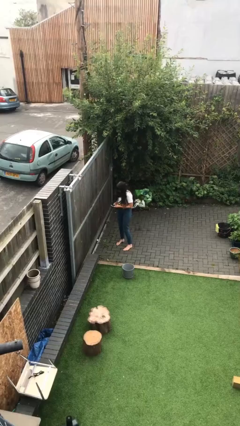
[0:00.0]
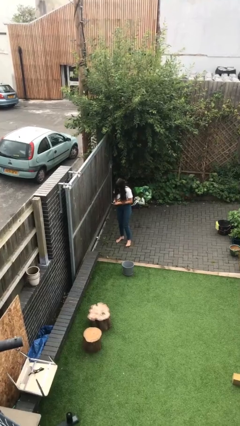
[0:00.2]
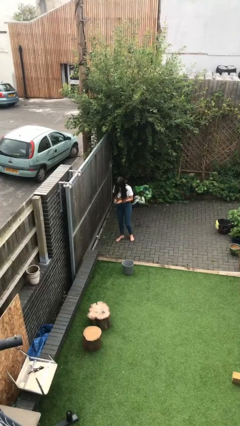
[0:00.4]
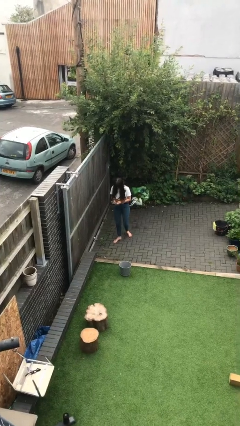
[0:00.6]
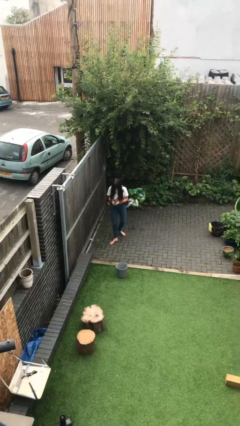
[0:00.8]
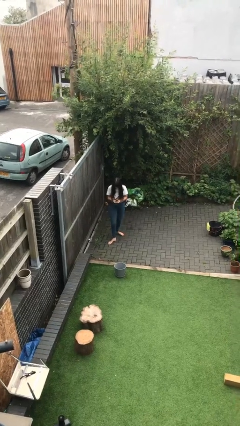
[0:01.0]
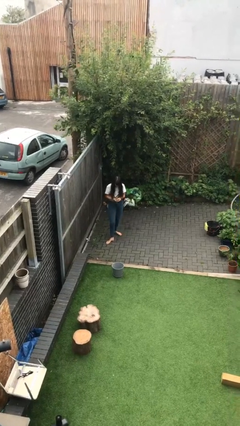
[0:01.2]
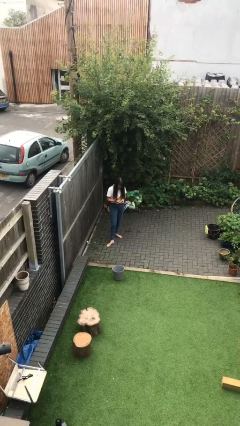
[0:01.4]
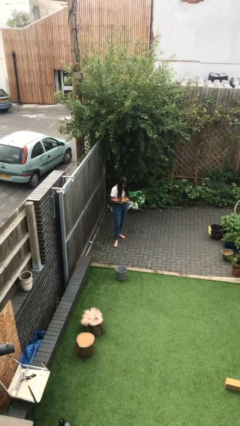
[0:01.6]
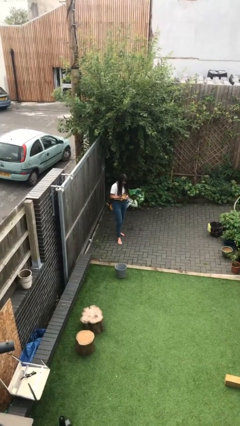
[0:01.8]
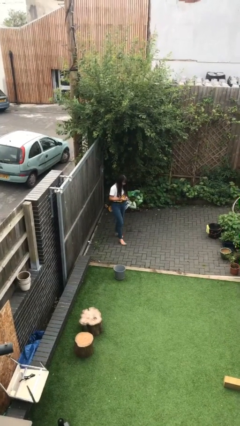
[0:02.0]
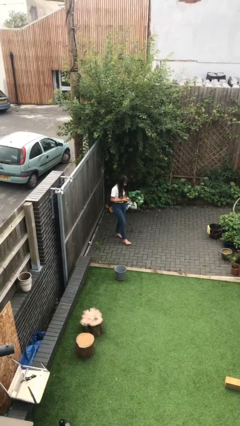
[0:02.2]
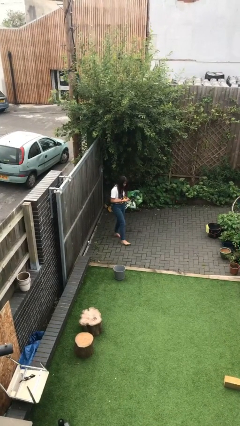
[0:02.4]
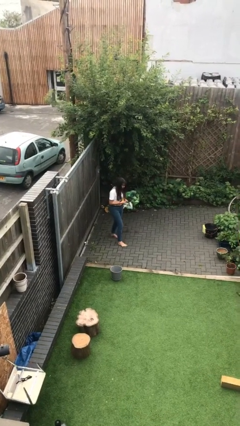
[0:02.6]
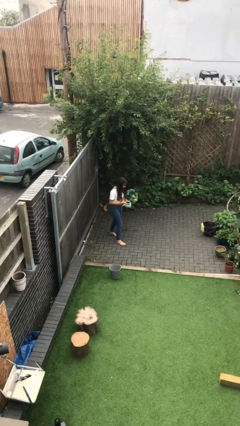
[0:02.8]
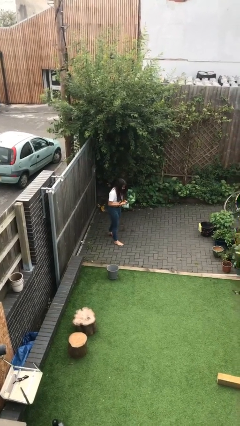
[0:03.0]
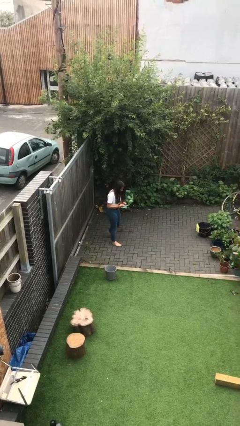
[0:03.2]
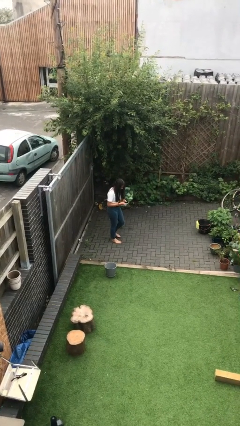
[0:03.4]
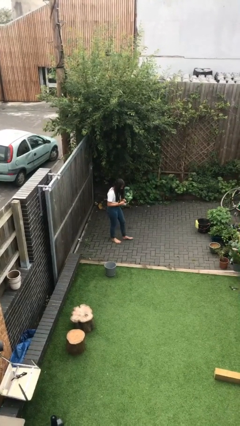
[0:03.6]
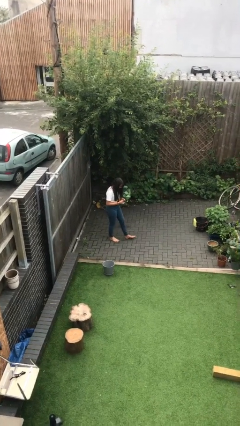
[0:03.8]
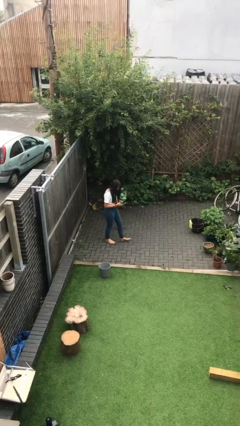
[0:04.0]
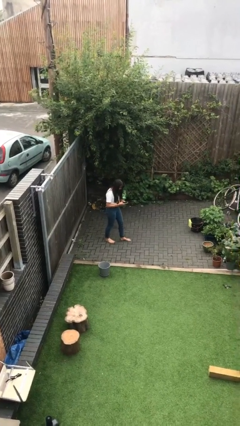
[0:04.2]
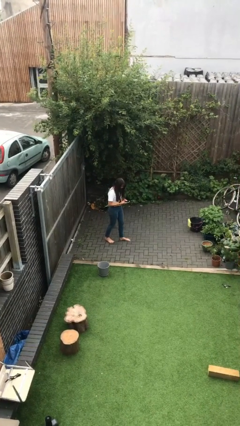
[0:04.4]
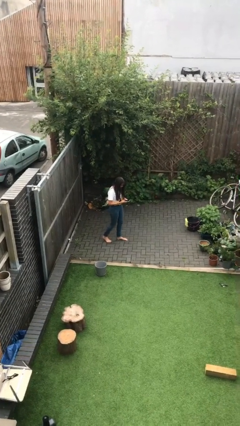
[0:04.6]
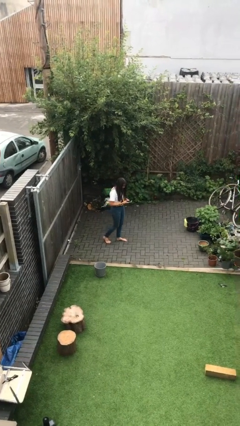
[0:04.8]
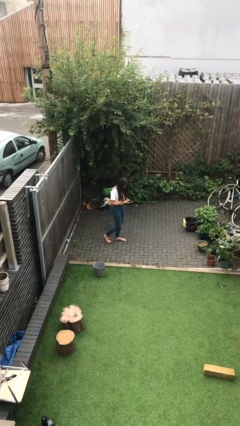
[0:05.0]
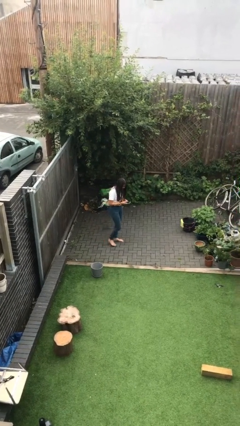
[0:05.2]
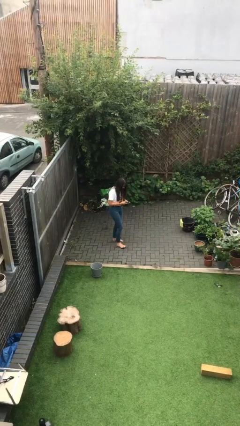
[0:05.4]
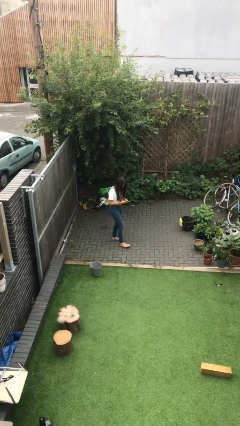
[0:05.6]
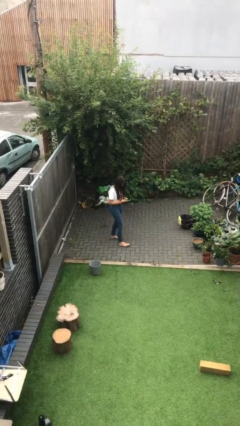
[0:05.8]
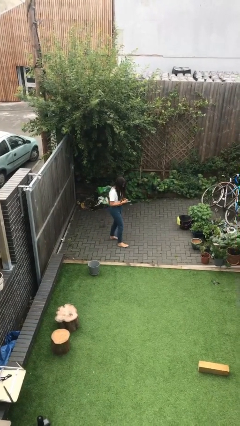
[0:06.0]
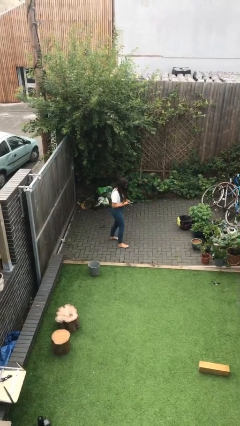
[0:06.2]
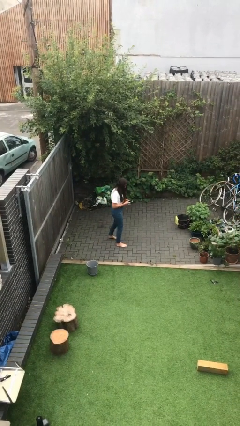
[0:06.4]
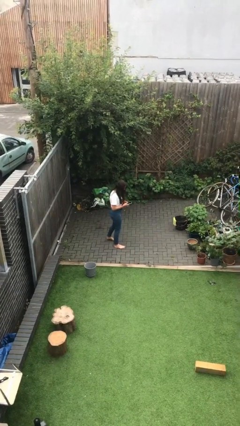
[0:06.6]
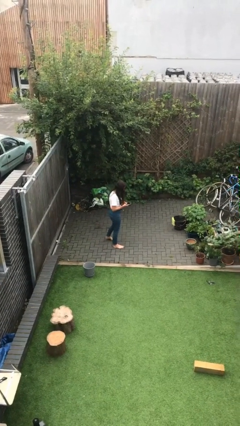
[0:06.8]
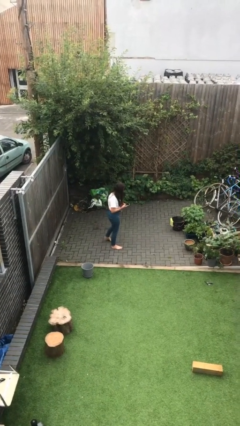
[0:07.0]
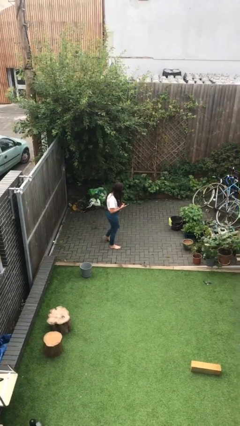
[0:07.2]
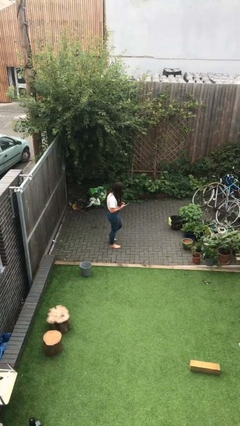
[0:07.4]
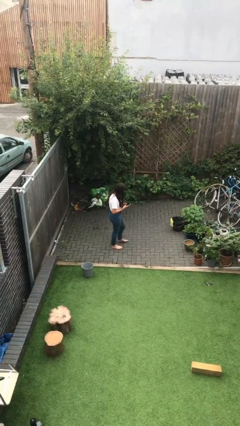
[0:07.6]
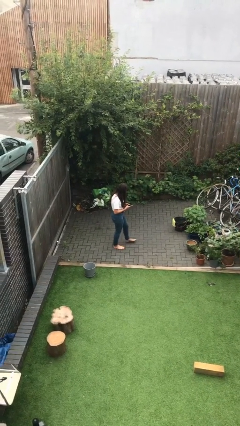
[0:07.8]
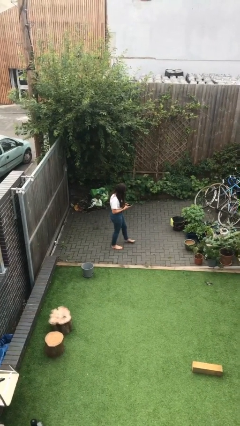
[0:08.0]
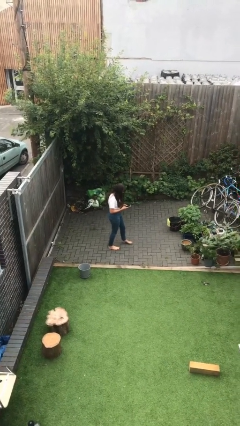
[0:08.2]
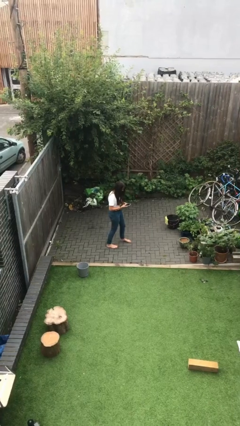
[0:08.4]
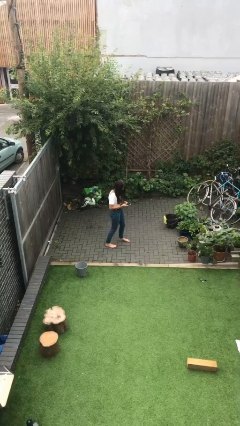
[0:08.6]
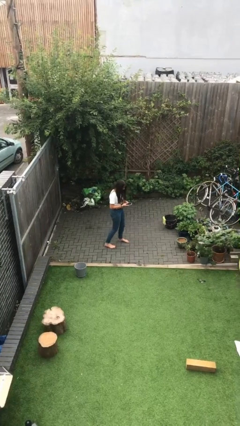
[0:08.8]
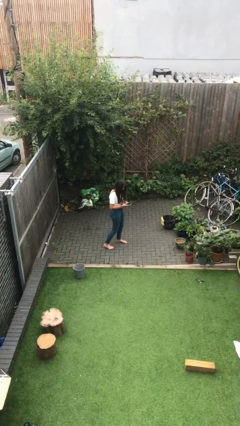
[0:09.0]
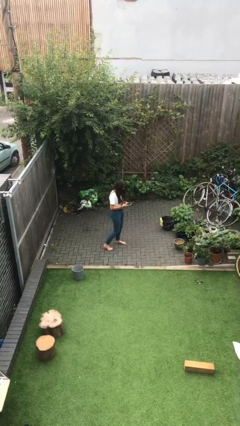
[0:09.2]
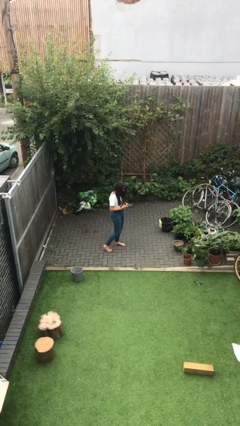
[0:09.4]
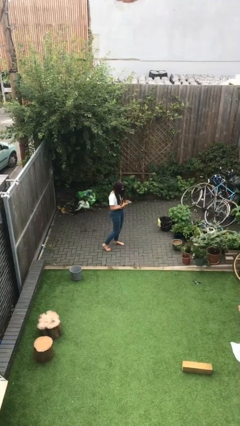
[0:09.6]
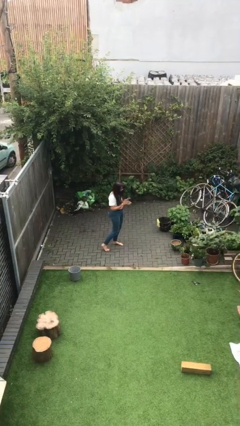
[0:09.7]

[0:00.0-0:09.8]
person texts on phone

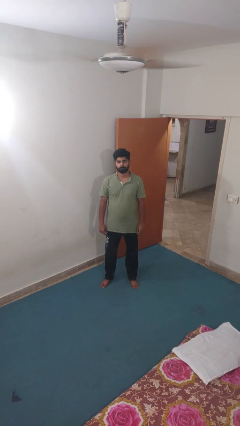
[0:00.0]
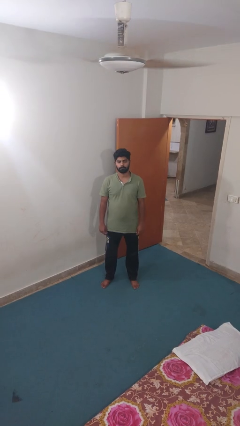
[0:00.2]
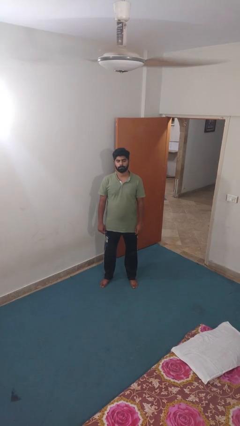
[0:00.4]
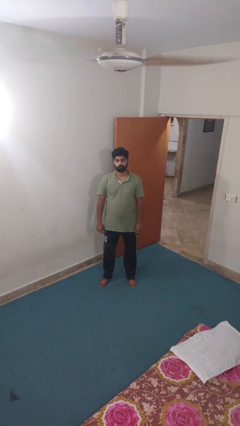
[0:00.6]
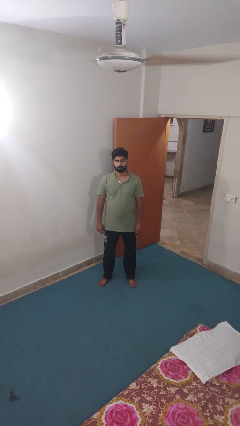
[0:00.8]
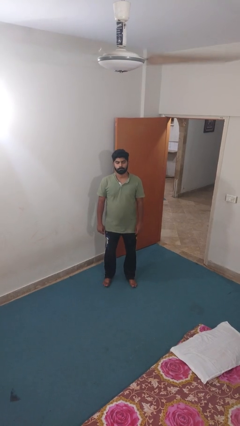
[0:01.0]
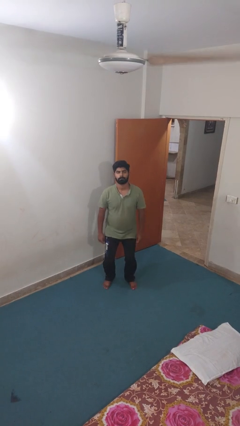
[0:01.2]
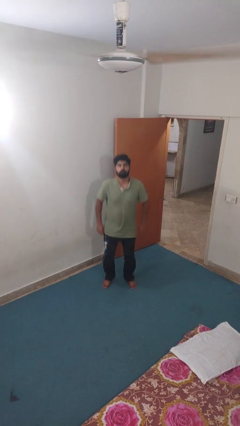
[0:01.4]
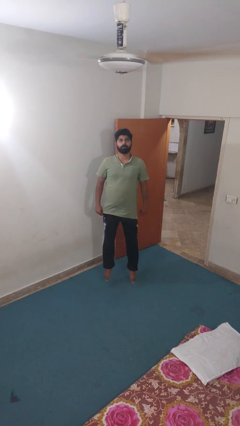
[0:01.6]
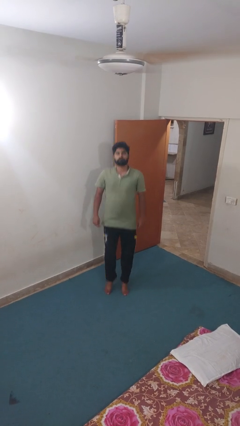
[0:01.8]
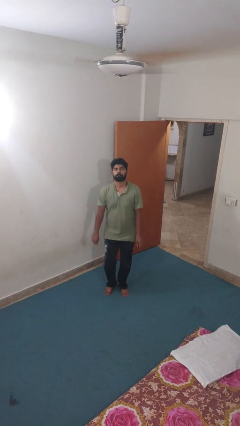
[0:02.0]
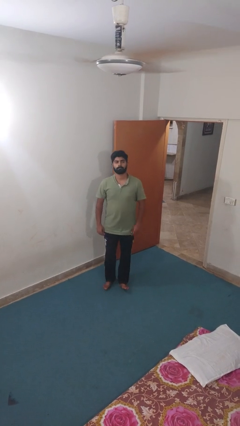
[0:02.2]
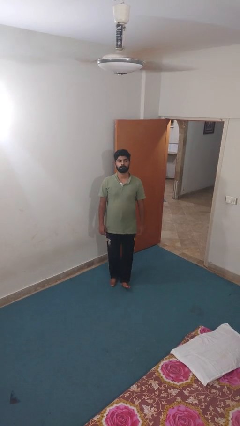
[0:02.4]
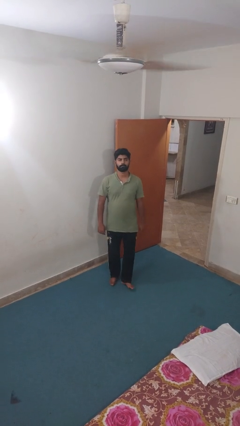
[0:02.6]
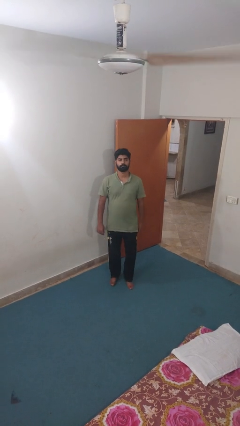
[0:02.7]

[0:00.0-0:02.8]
person jumps

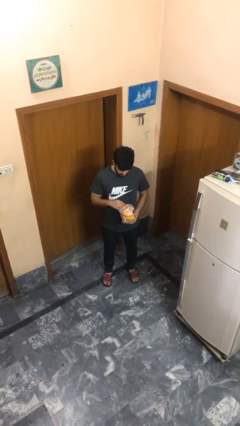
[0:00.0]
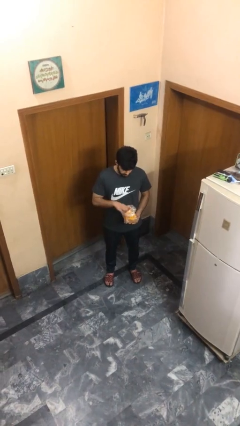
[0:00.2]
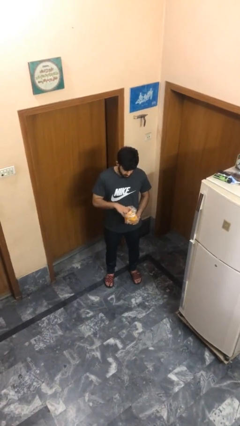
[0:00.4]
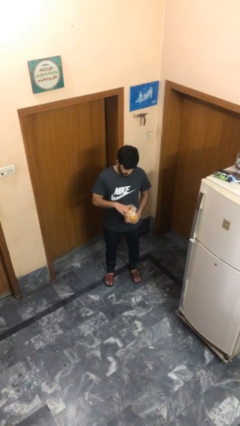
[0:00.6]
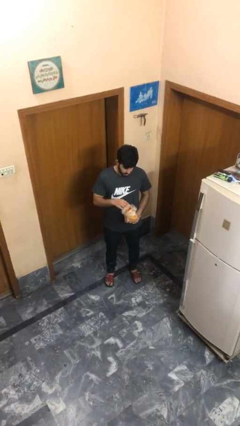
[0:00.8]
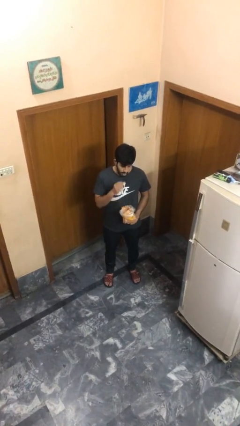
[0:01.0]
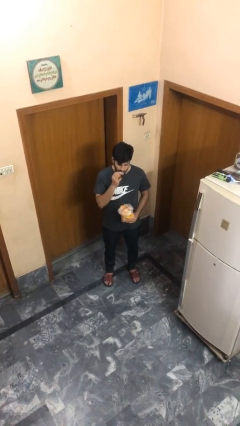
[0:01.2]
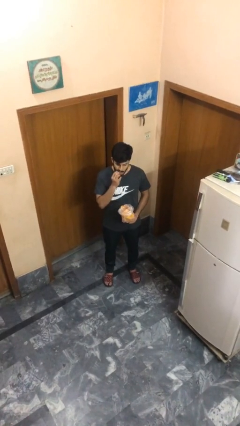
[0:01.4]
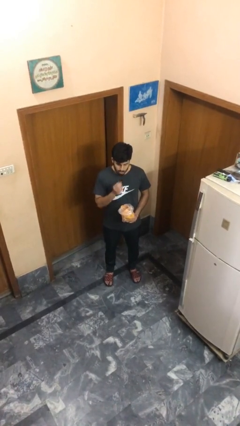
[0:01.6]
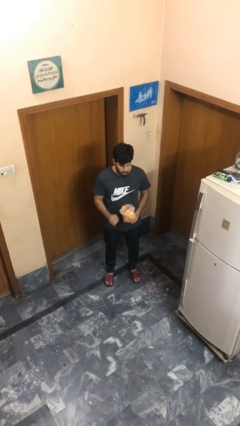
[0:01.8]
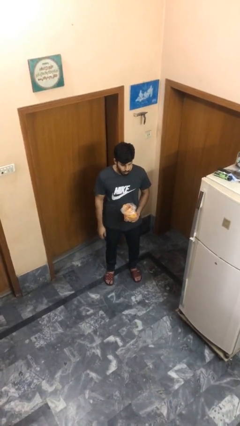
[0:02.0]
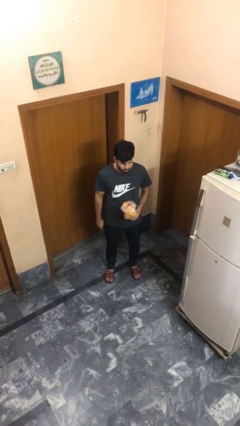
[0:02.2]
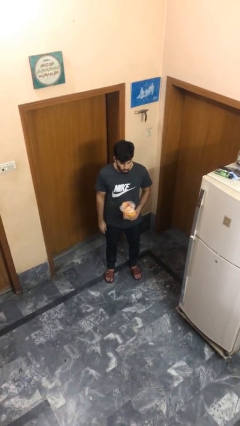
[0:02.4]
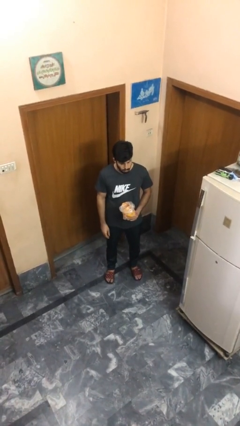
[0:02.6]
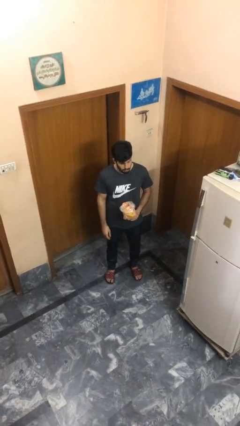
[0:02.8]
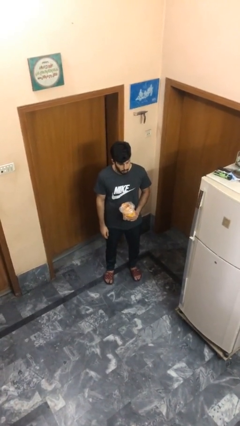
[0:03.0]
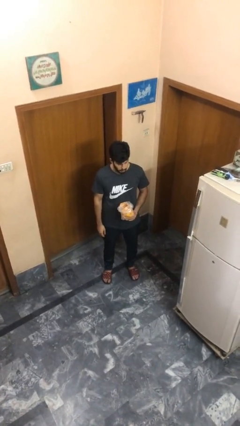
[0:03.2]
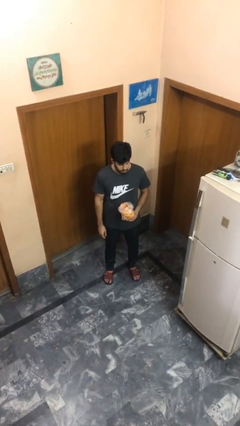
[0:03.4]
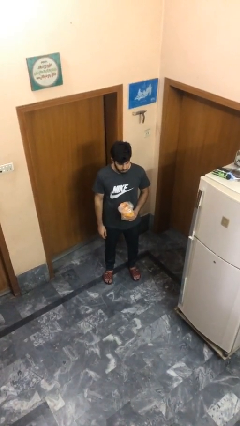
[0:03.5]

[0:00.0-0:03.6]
person eats snack from bag

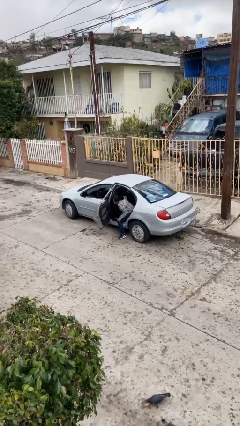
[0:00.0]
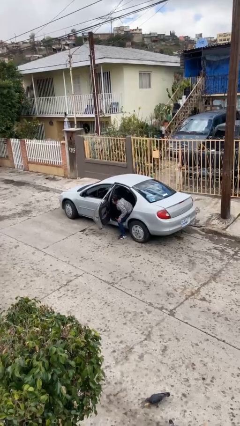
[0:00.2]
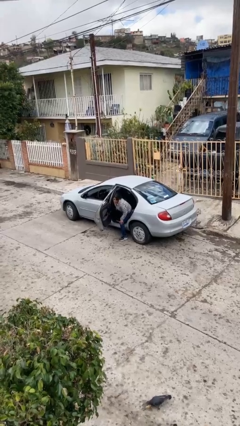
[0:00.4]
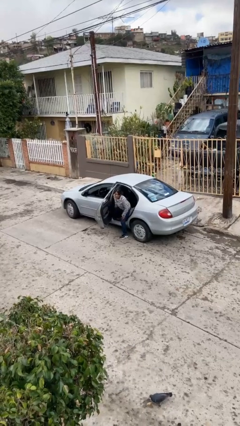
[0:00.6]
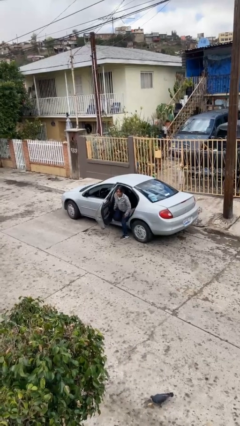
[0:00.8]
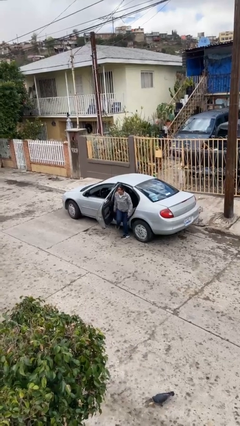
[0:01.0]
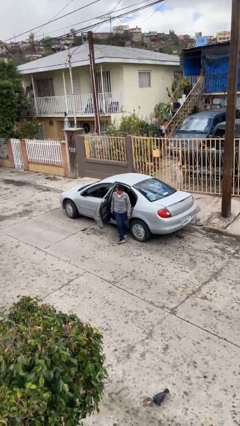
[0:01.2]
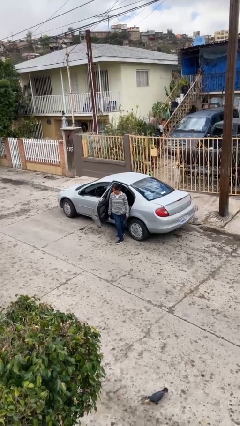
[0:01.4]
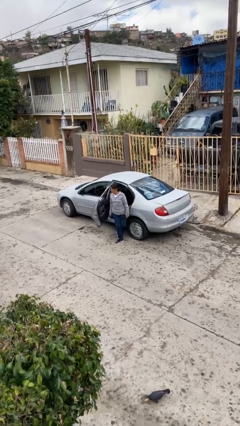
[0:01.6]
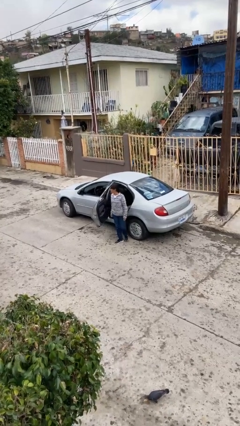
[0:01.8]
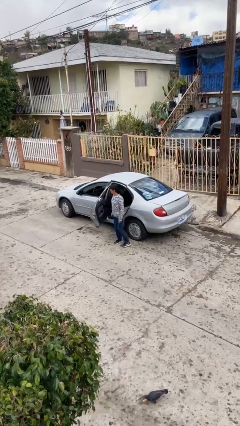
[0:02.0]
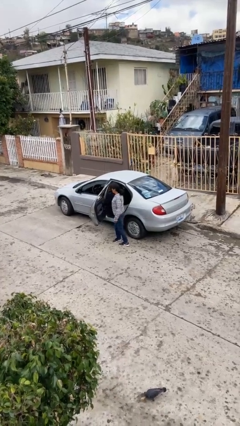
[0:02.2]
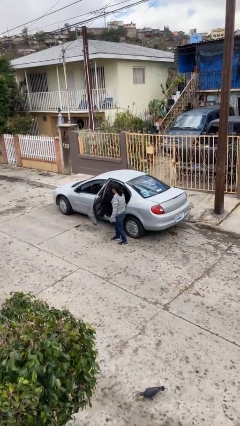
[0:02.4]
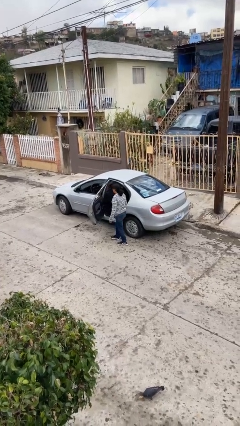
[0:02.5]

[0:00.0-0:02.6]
person exits car
